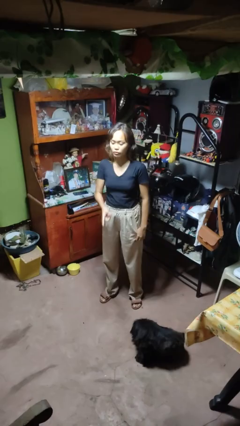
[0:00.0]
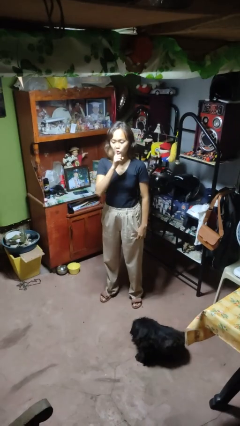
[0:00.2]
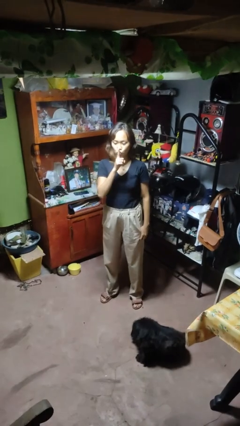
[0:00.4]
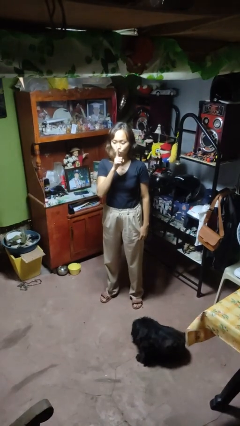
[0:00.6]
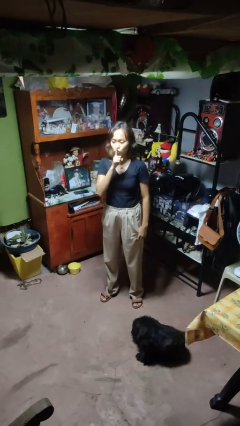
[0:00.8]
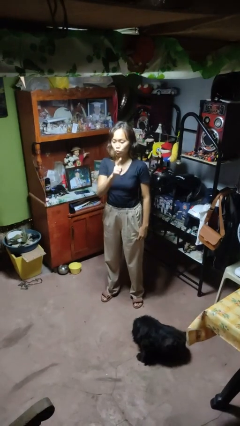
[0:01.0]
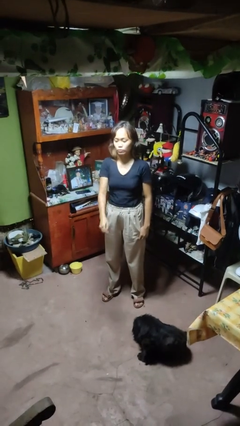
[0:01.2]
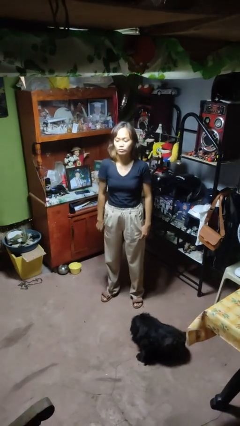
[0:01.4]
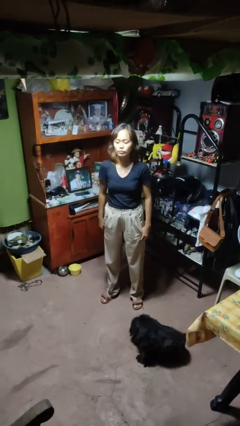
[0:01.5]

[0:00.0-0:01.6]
person gestures be quiet

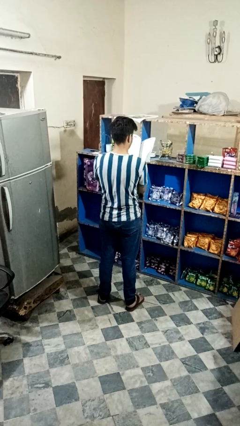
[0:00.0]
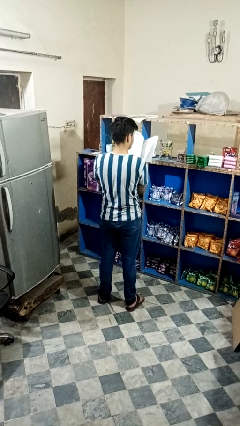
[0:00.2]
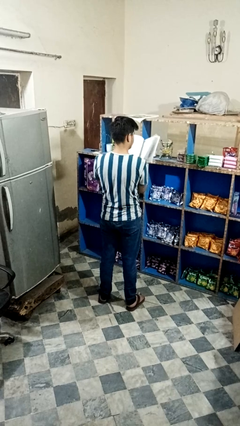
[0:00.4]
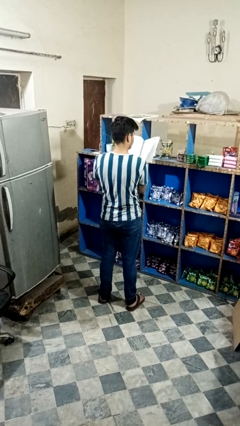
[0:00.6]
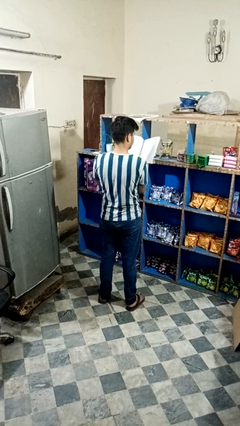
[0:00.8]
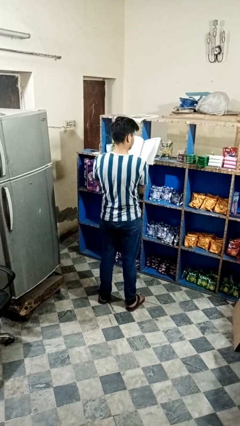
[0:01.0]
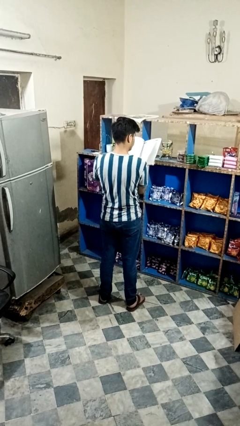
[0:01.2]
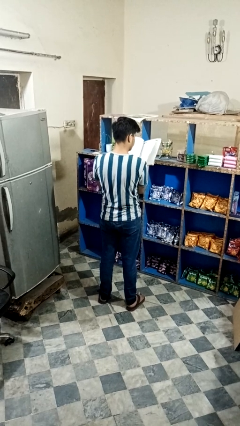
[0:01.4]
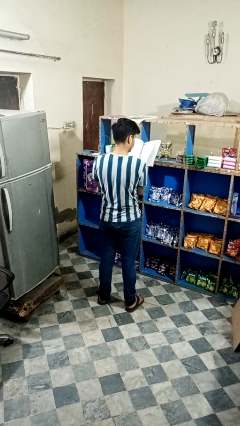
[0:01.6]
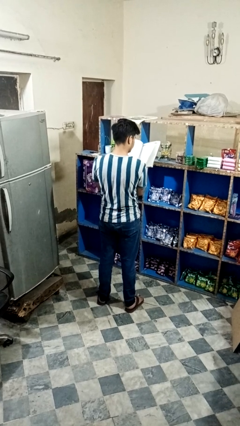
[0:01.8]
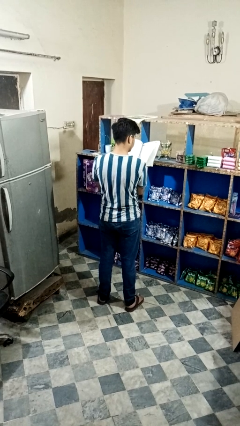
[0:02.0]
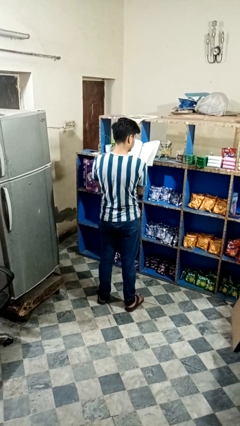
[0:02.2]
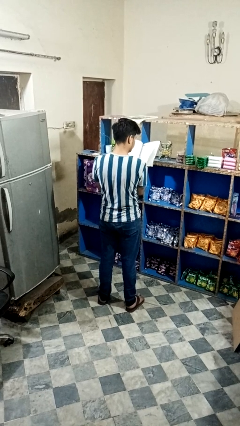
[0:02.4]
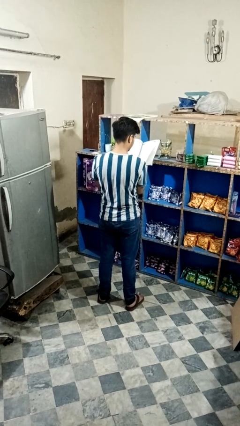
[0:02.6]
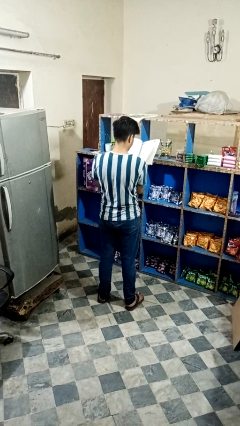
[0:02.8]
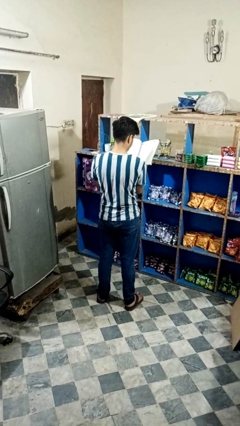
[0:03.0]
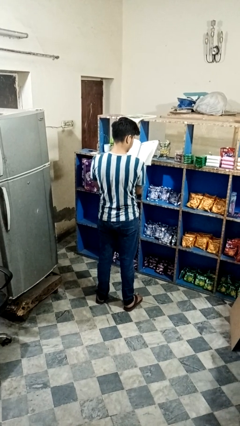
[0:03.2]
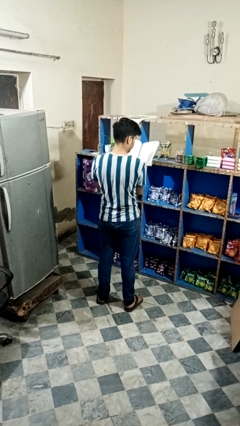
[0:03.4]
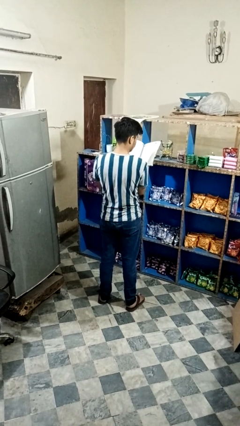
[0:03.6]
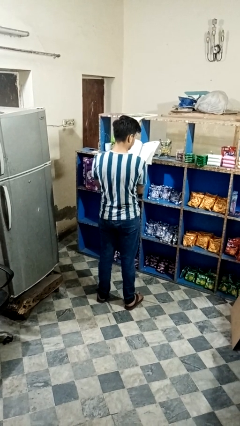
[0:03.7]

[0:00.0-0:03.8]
person reads book

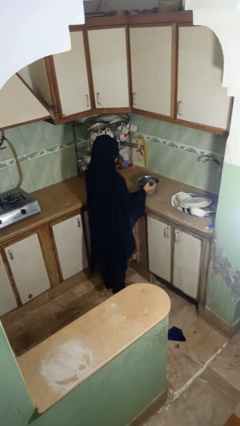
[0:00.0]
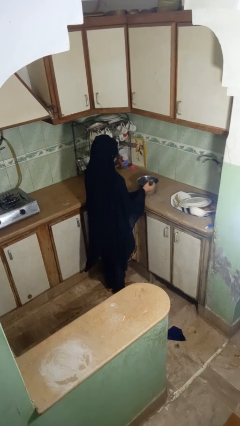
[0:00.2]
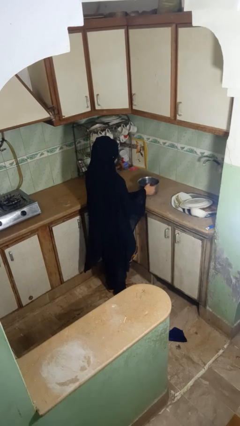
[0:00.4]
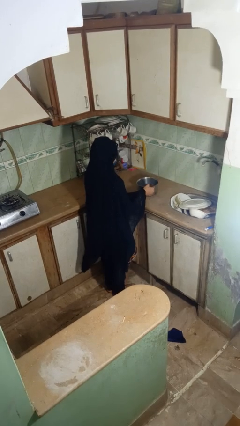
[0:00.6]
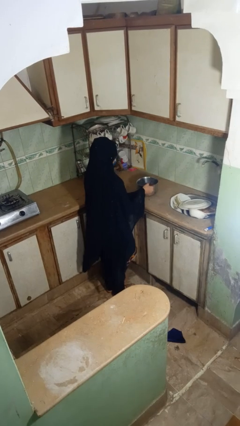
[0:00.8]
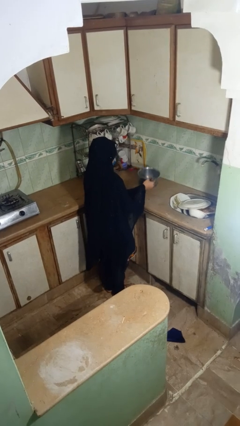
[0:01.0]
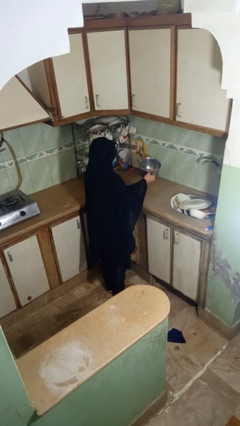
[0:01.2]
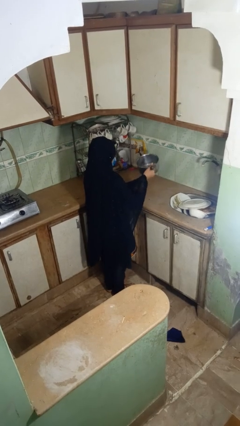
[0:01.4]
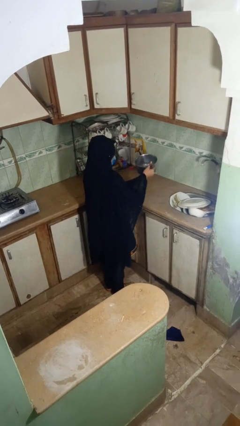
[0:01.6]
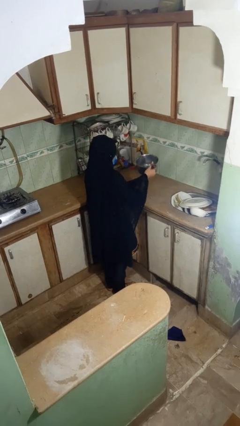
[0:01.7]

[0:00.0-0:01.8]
person picks up object from countertop

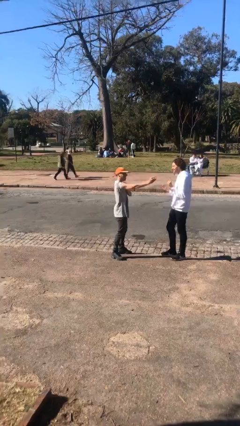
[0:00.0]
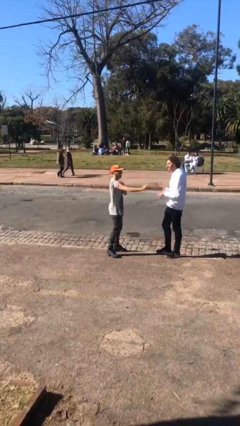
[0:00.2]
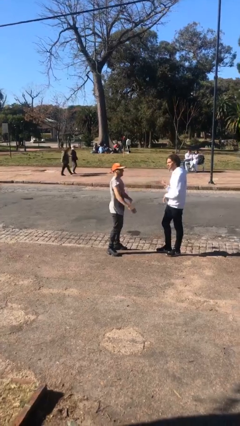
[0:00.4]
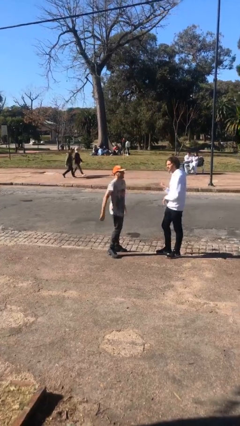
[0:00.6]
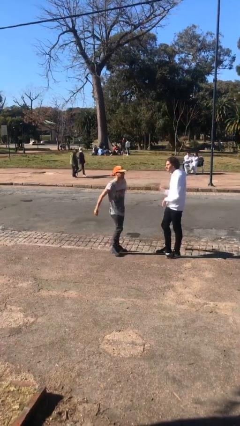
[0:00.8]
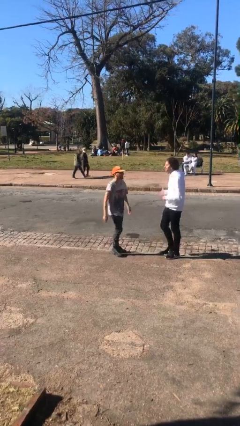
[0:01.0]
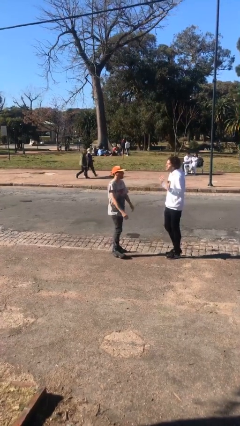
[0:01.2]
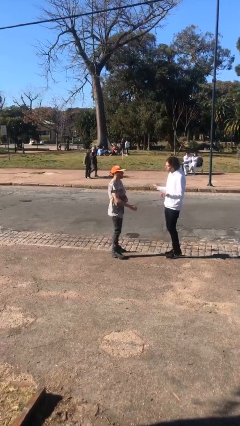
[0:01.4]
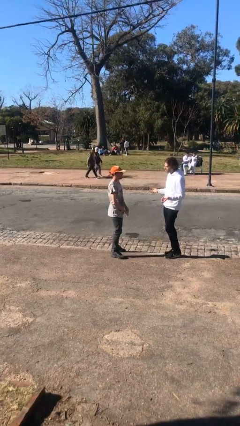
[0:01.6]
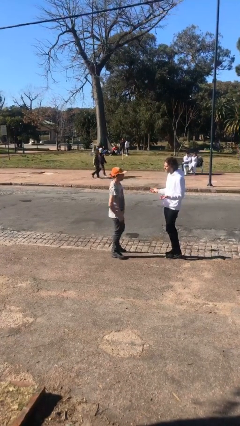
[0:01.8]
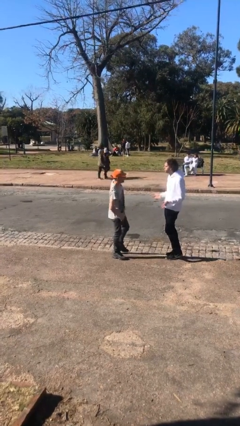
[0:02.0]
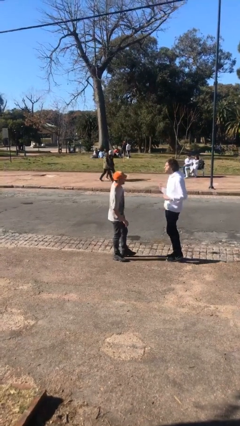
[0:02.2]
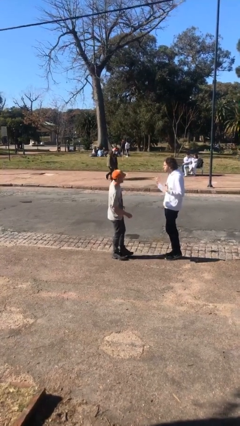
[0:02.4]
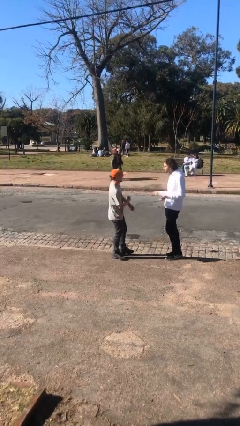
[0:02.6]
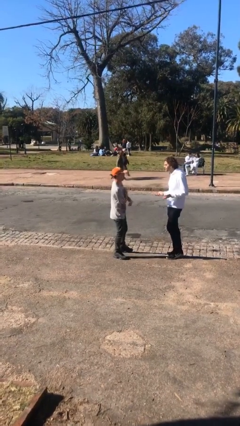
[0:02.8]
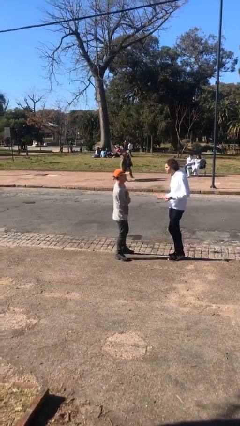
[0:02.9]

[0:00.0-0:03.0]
person talks to person

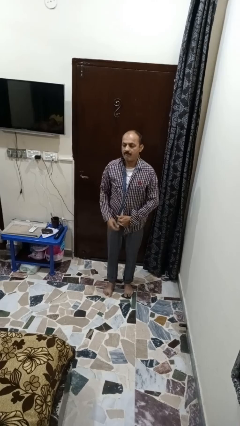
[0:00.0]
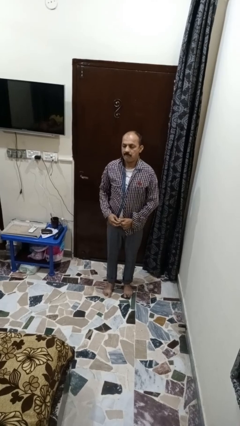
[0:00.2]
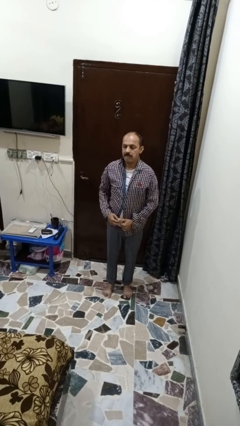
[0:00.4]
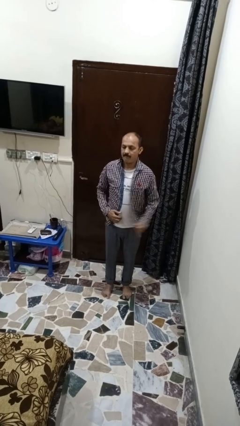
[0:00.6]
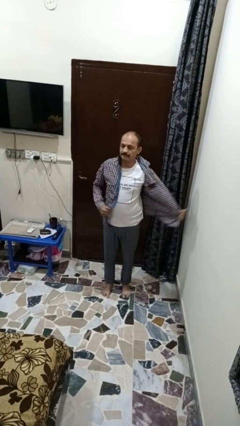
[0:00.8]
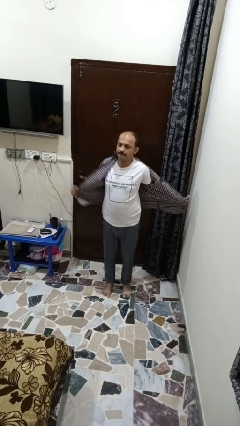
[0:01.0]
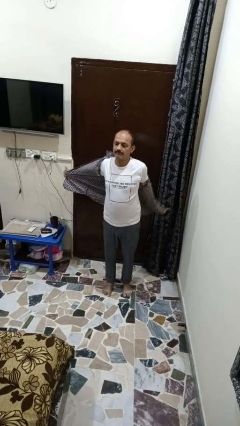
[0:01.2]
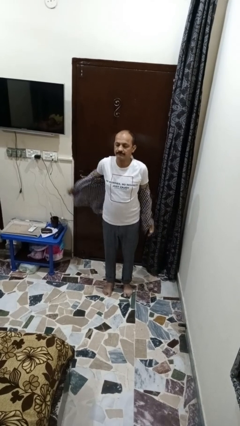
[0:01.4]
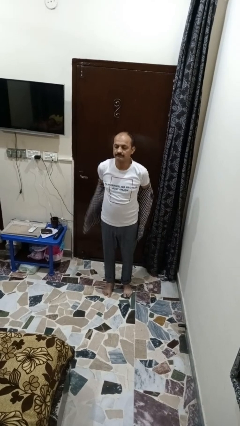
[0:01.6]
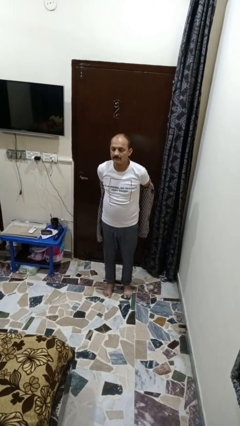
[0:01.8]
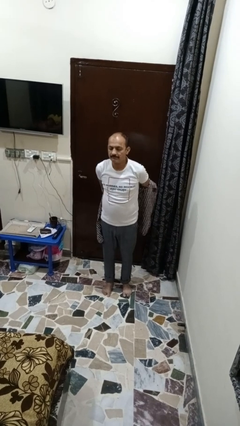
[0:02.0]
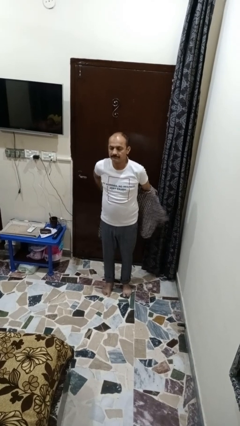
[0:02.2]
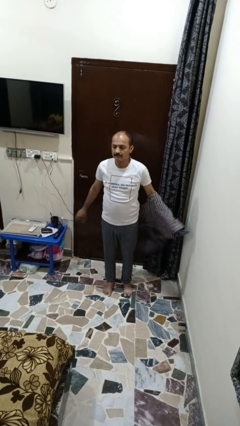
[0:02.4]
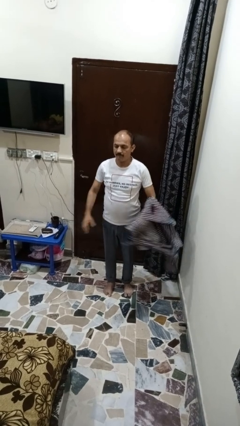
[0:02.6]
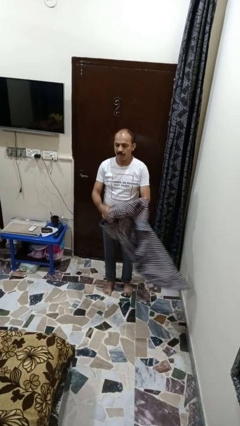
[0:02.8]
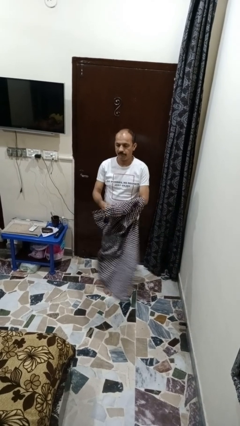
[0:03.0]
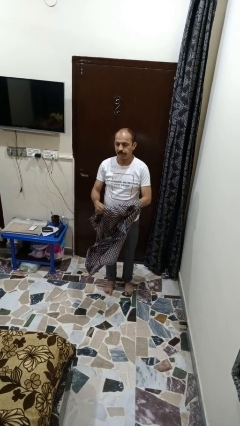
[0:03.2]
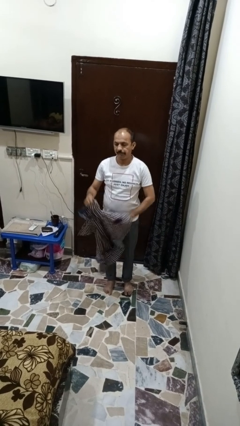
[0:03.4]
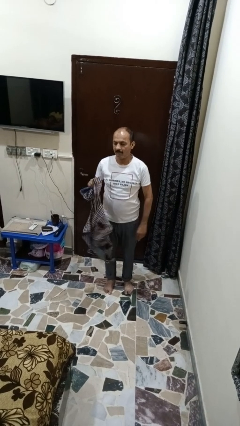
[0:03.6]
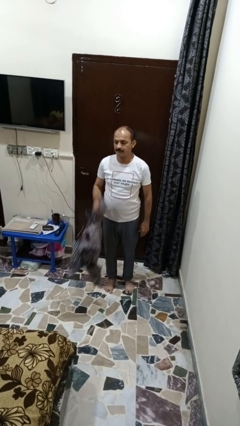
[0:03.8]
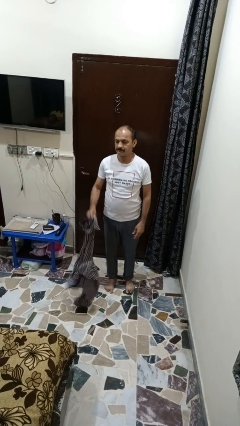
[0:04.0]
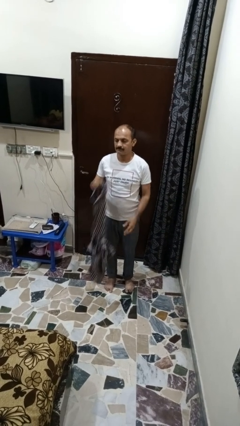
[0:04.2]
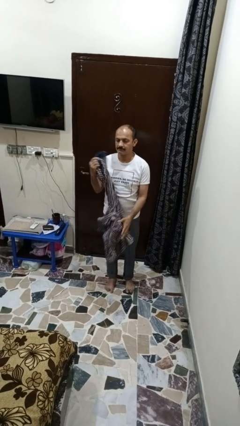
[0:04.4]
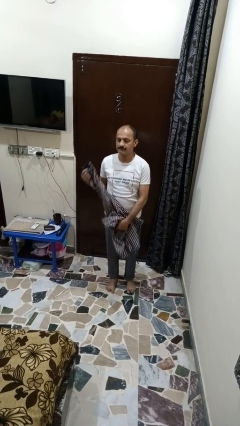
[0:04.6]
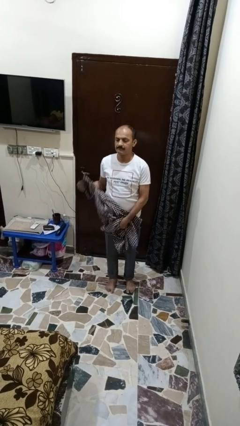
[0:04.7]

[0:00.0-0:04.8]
person takes off shirt

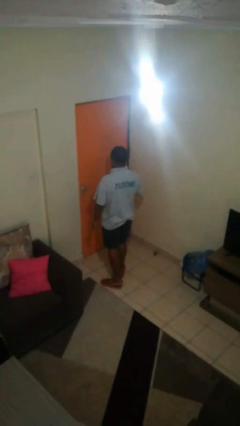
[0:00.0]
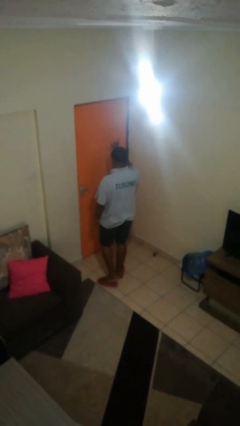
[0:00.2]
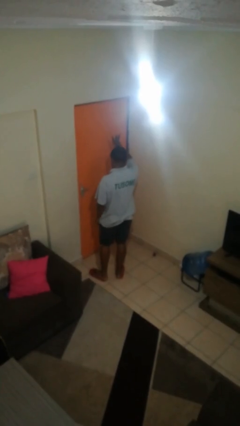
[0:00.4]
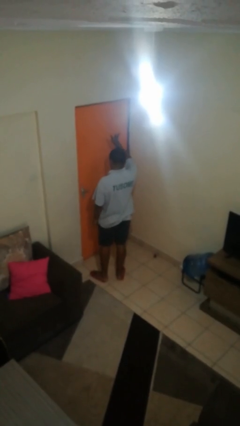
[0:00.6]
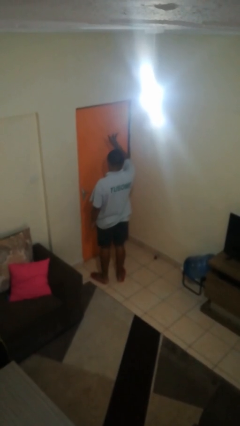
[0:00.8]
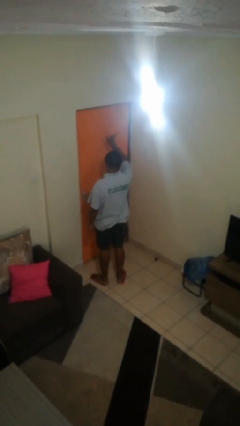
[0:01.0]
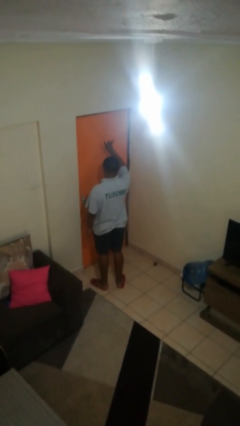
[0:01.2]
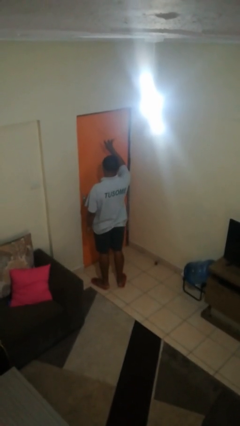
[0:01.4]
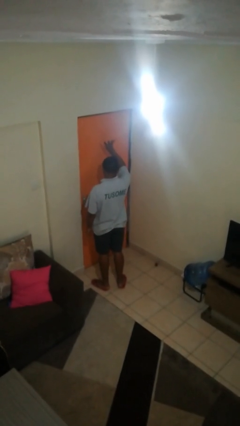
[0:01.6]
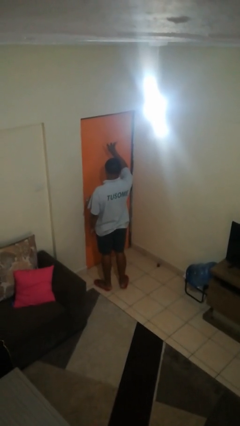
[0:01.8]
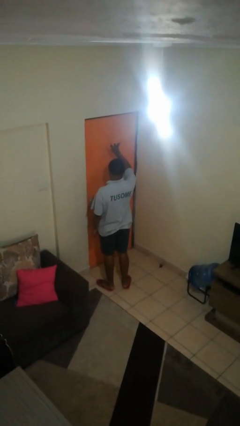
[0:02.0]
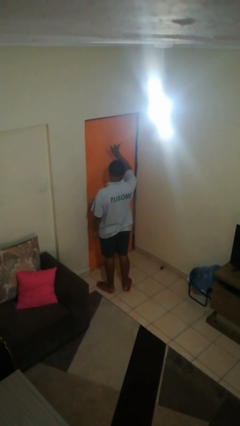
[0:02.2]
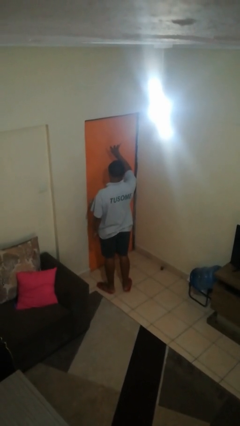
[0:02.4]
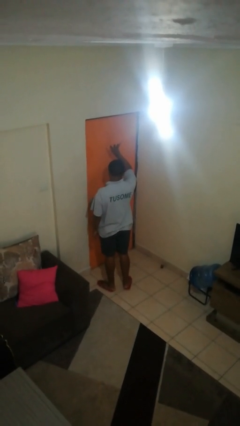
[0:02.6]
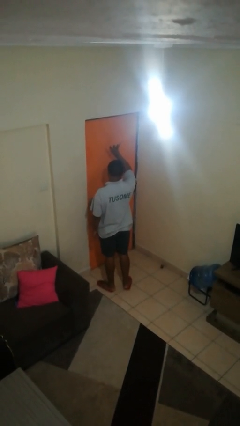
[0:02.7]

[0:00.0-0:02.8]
person gestures number four
